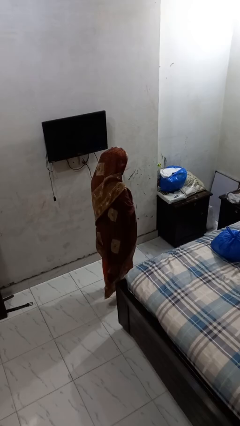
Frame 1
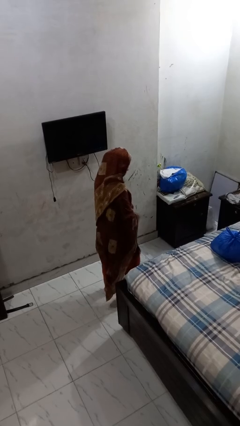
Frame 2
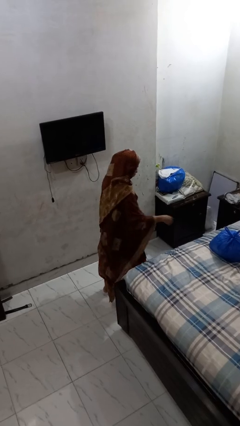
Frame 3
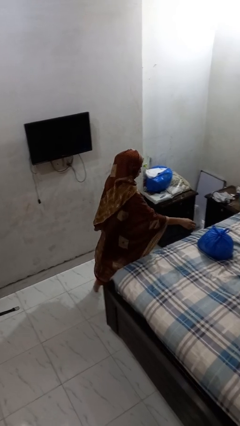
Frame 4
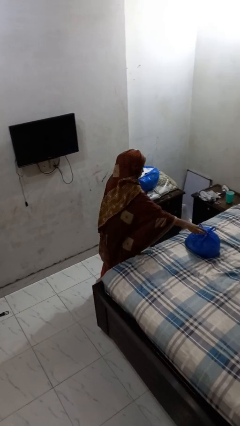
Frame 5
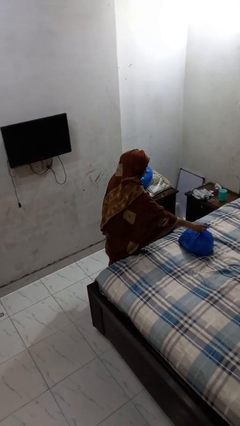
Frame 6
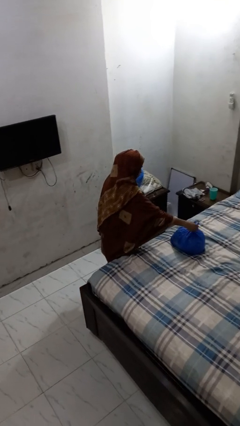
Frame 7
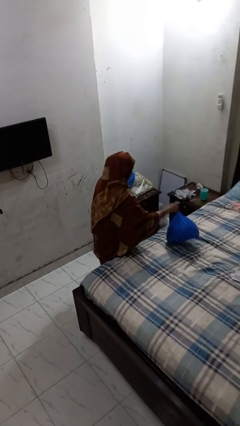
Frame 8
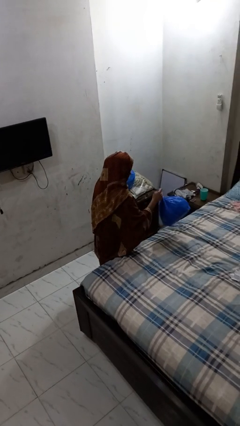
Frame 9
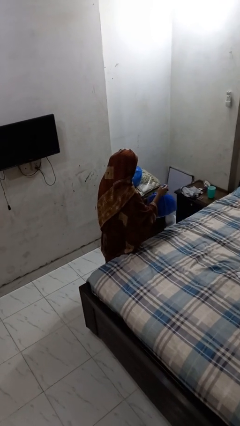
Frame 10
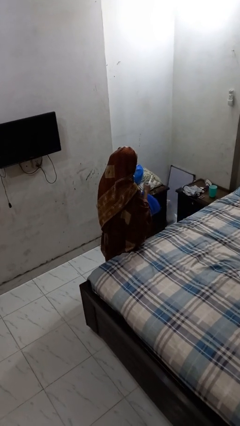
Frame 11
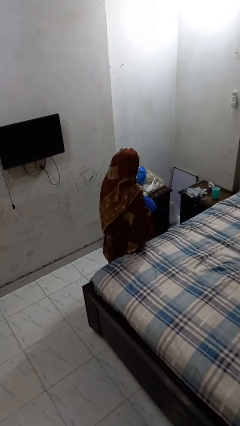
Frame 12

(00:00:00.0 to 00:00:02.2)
person picks up object from bed

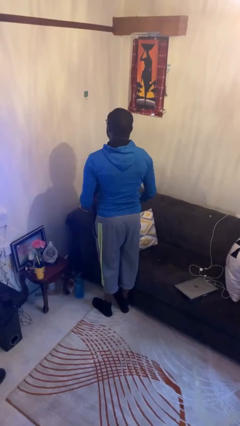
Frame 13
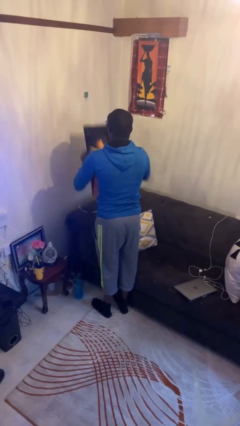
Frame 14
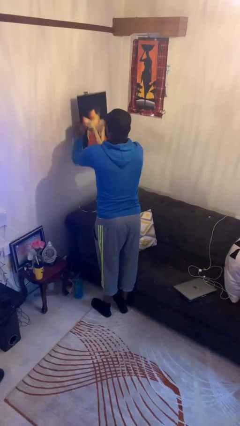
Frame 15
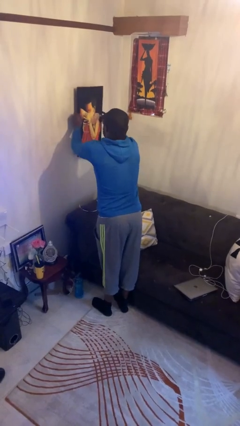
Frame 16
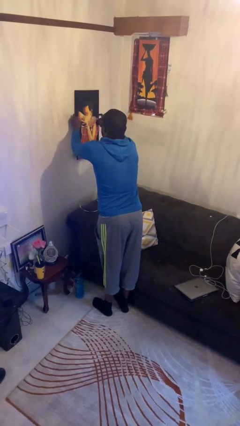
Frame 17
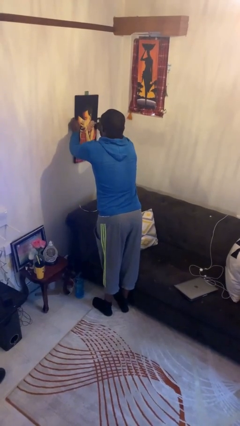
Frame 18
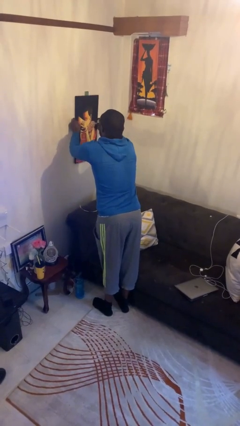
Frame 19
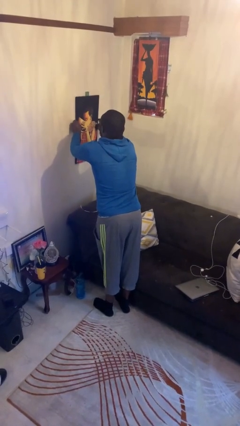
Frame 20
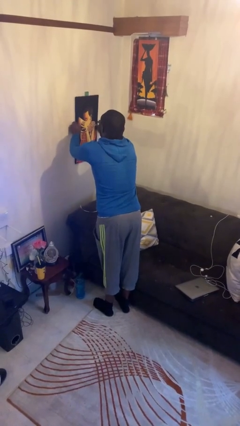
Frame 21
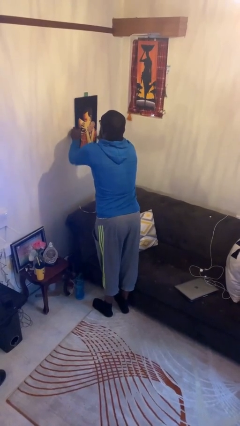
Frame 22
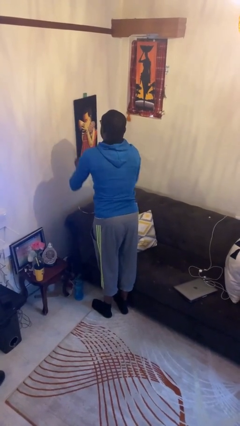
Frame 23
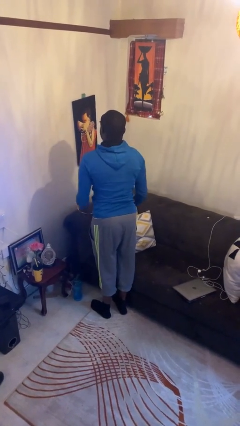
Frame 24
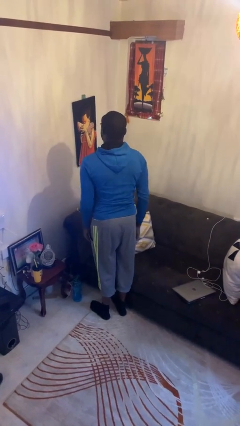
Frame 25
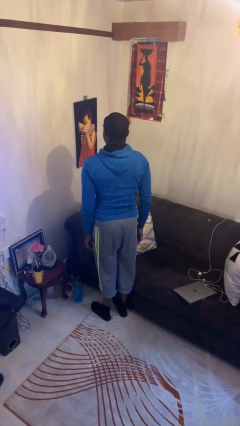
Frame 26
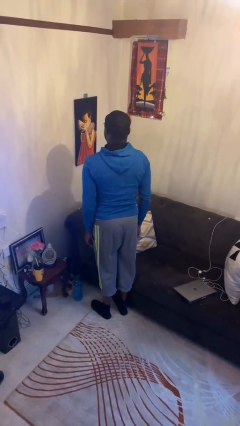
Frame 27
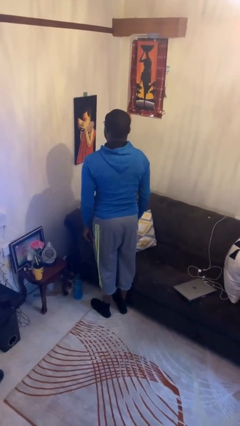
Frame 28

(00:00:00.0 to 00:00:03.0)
person puts up picture frame

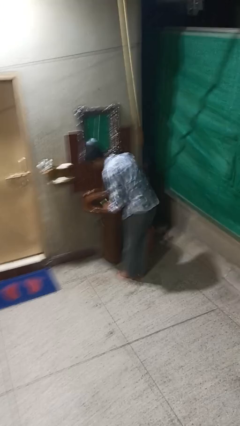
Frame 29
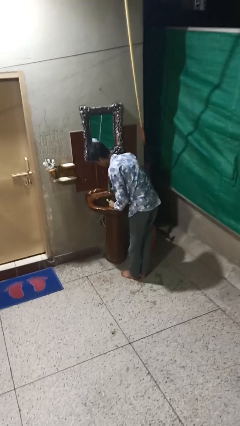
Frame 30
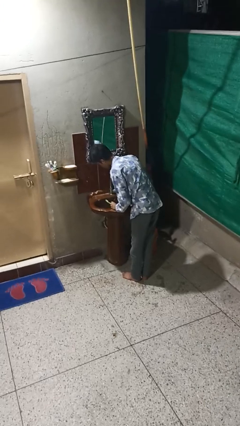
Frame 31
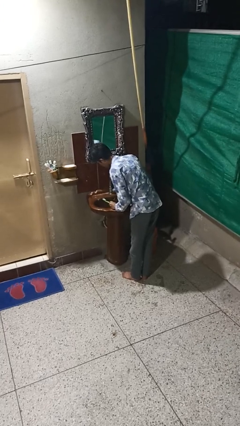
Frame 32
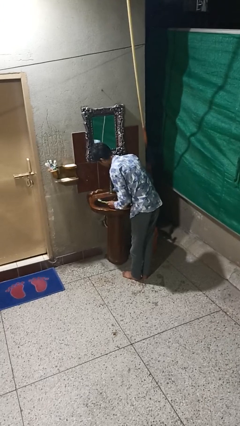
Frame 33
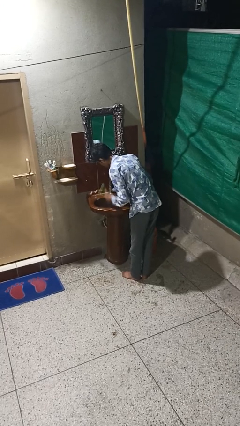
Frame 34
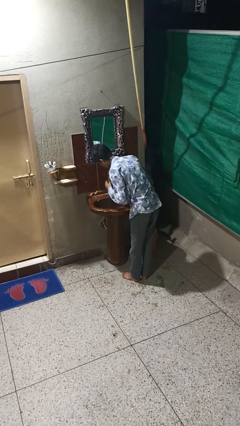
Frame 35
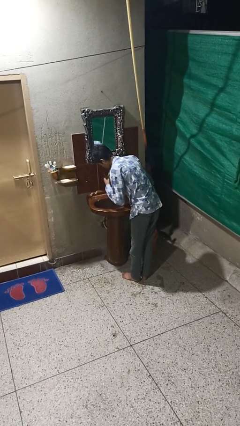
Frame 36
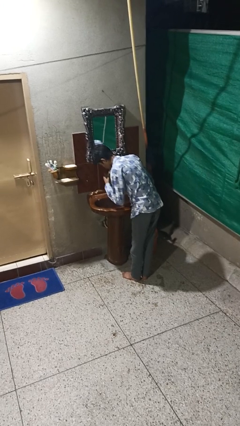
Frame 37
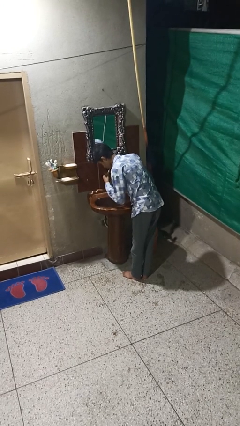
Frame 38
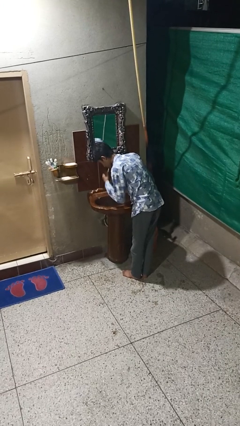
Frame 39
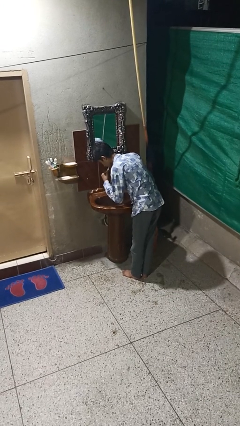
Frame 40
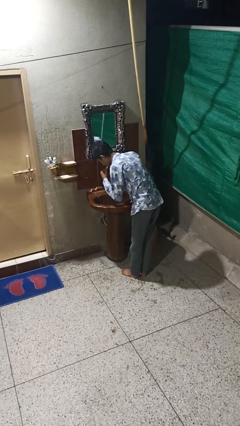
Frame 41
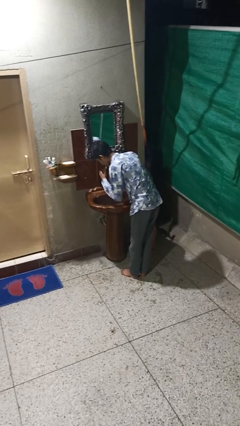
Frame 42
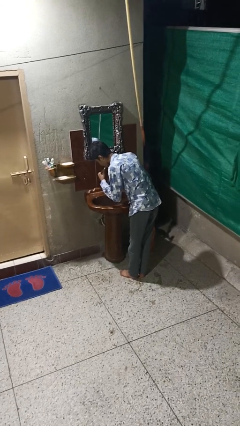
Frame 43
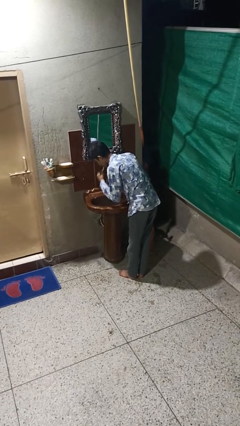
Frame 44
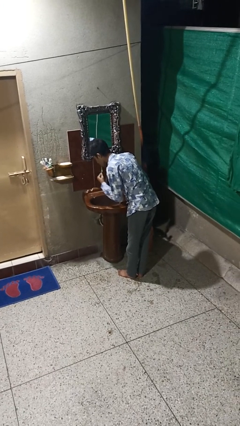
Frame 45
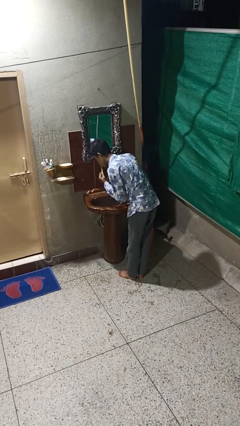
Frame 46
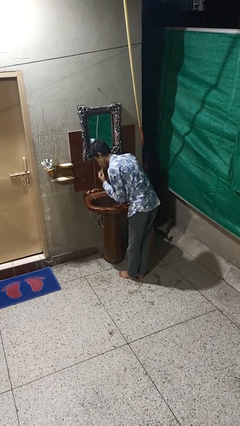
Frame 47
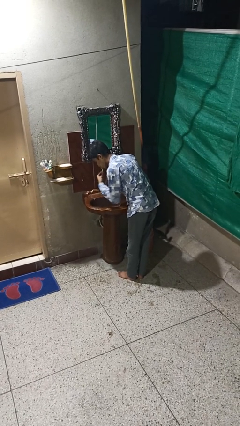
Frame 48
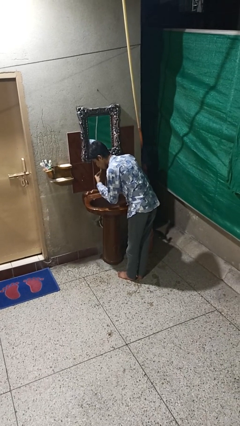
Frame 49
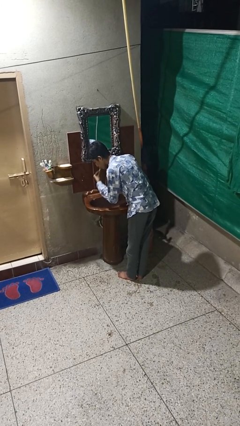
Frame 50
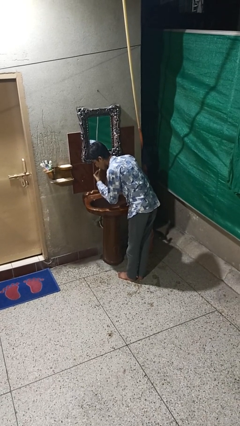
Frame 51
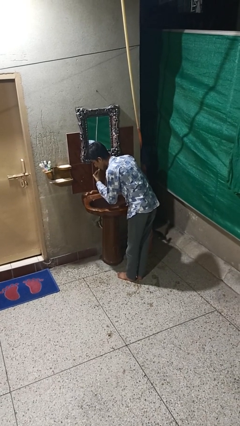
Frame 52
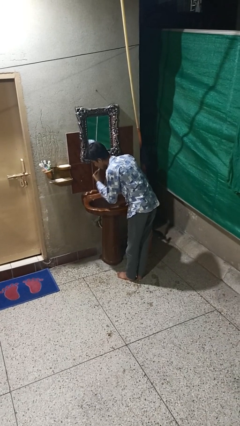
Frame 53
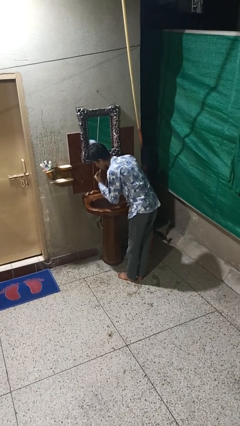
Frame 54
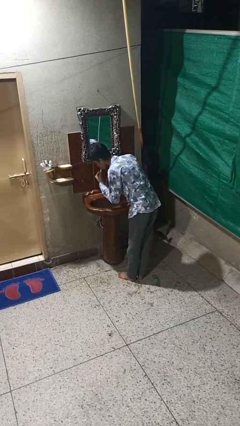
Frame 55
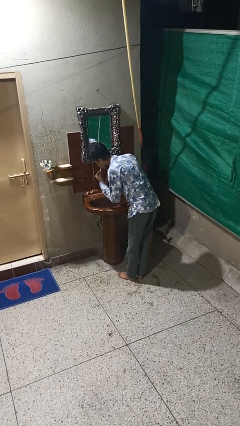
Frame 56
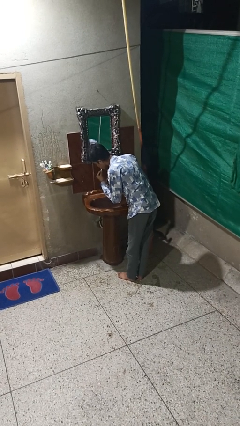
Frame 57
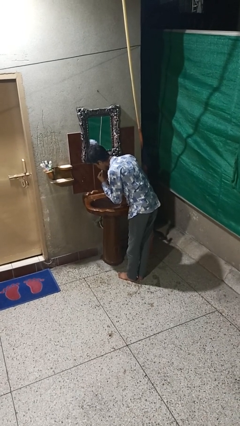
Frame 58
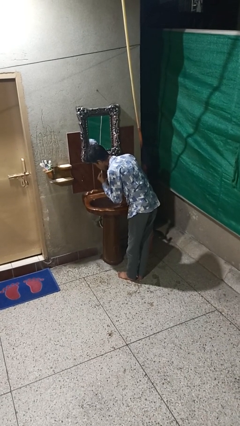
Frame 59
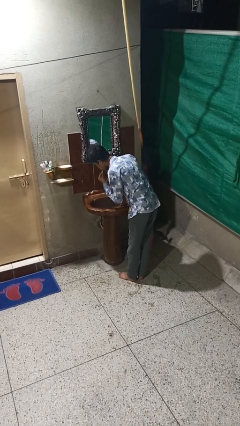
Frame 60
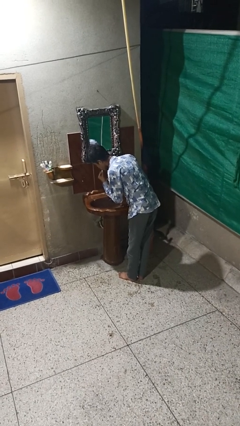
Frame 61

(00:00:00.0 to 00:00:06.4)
person brushes teeth

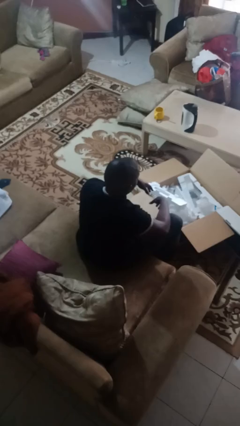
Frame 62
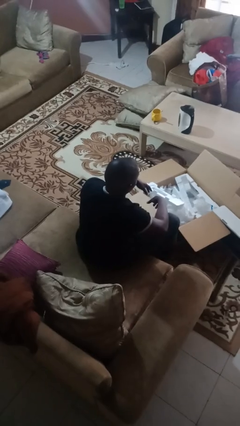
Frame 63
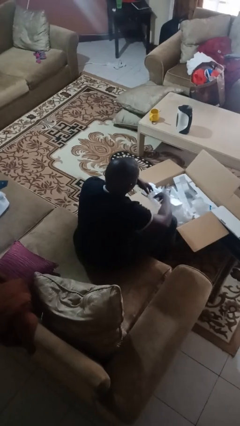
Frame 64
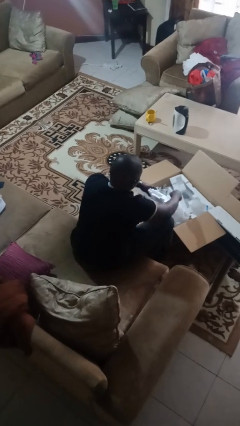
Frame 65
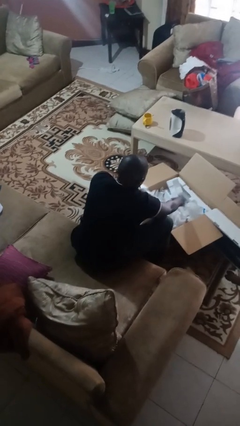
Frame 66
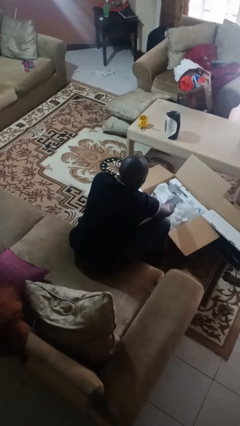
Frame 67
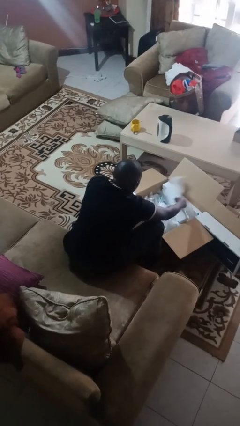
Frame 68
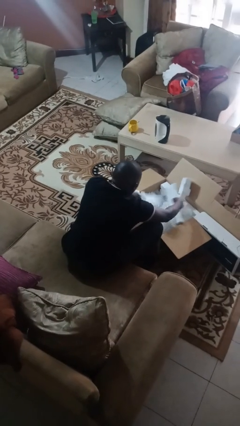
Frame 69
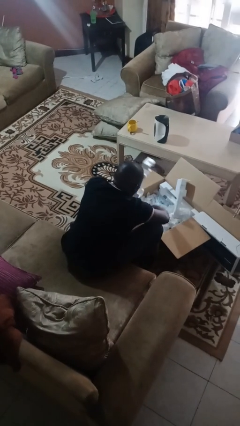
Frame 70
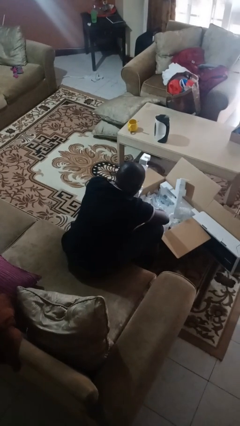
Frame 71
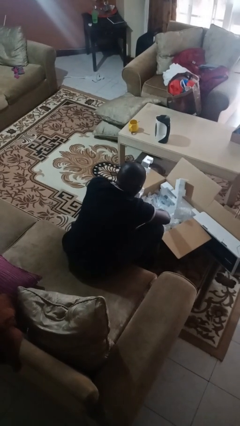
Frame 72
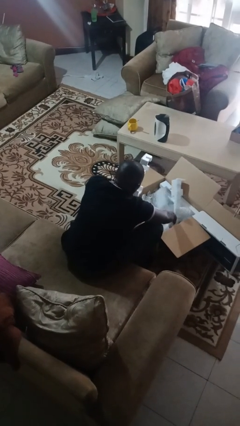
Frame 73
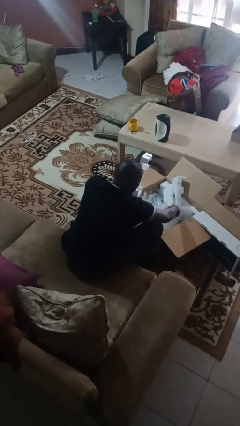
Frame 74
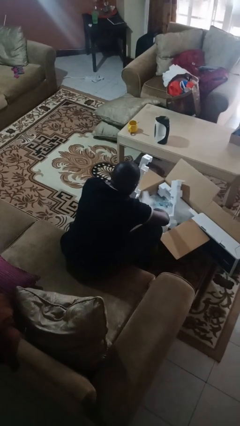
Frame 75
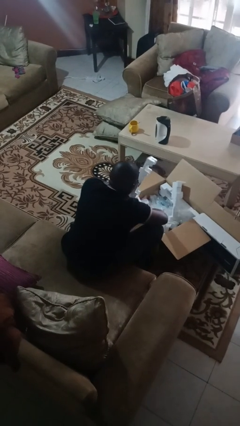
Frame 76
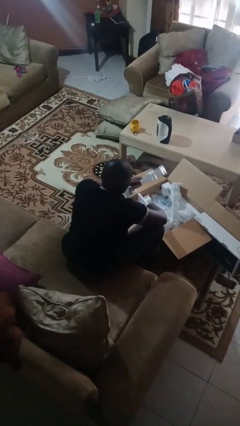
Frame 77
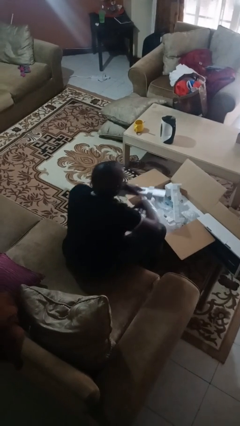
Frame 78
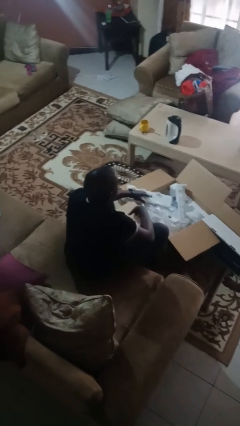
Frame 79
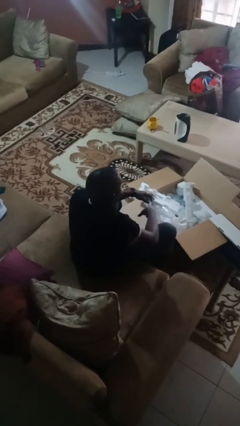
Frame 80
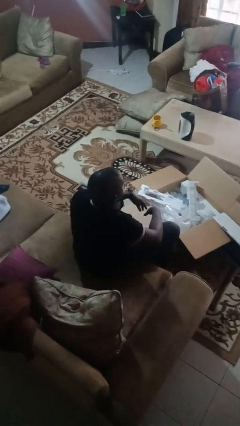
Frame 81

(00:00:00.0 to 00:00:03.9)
person searches in box

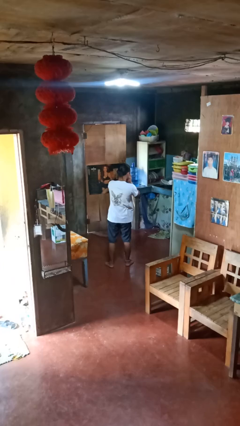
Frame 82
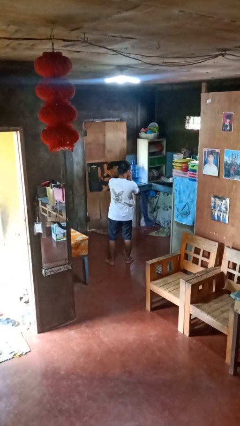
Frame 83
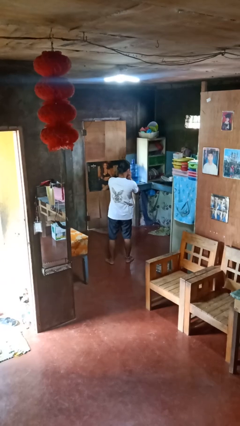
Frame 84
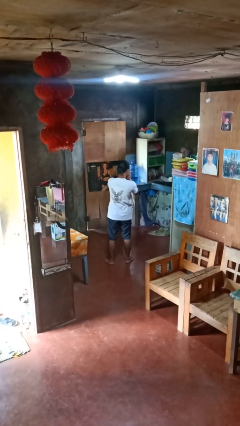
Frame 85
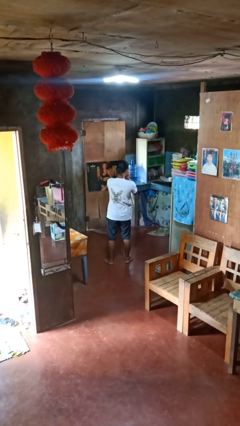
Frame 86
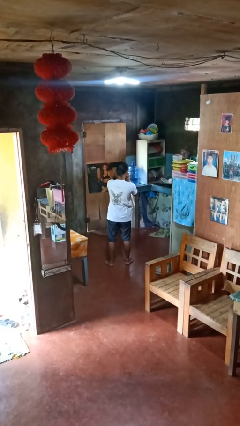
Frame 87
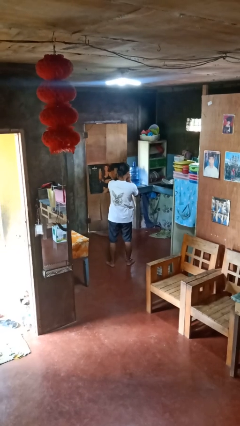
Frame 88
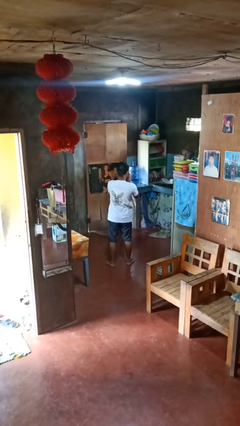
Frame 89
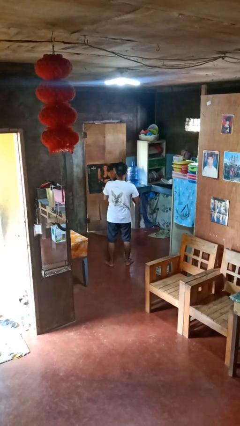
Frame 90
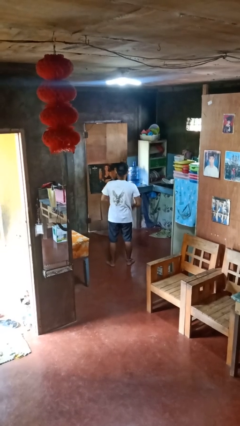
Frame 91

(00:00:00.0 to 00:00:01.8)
person sneezes into hand

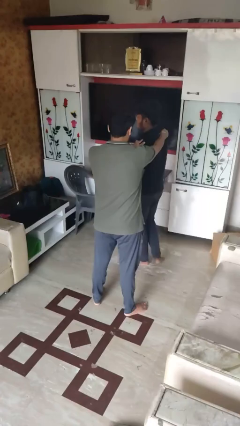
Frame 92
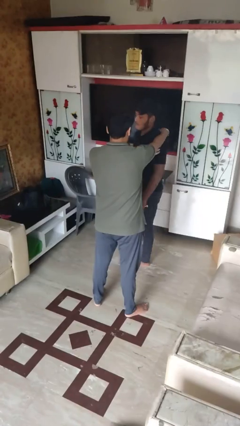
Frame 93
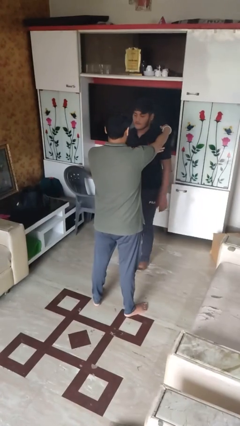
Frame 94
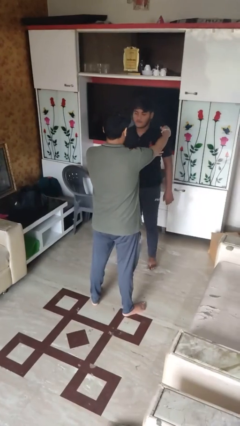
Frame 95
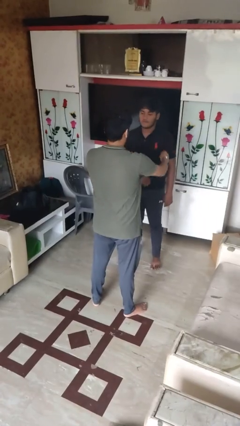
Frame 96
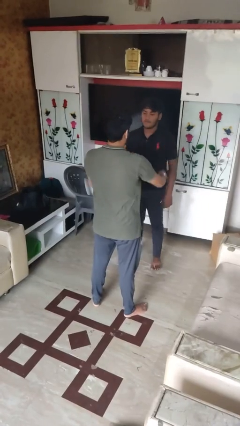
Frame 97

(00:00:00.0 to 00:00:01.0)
person spins person around
